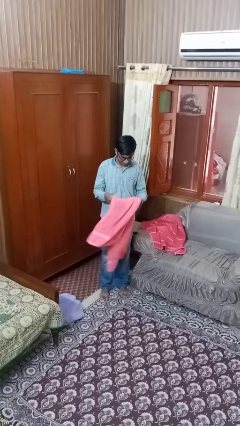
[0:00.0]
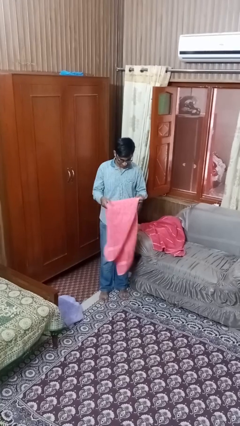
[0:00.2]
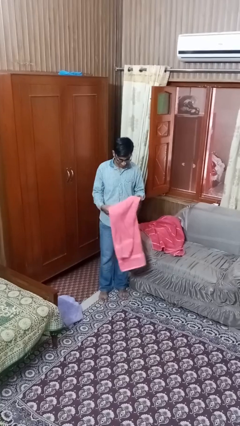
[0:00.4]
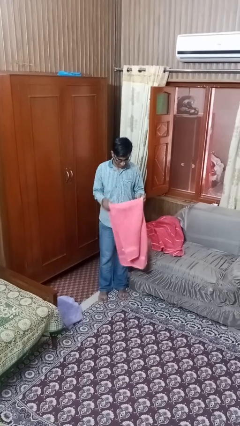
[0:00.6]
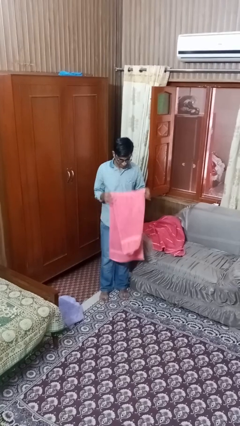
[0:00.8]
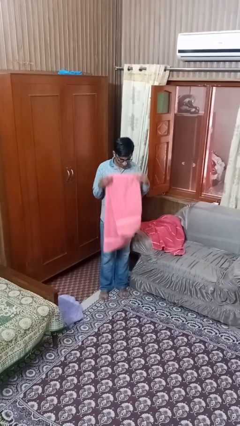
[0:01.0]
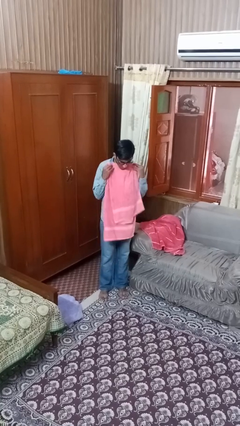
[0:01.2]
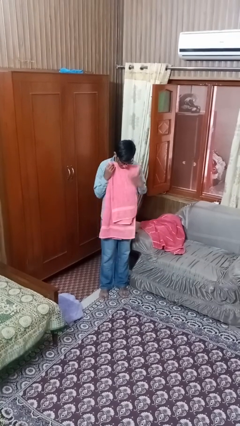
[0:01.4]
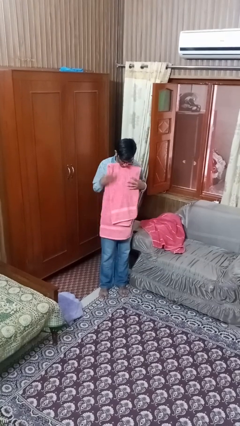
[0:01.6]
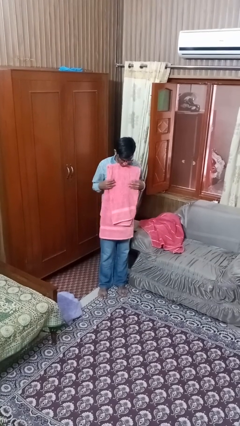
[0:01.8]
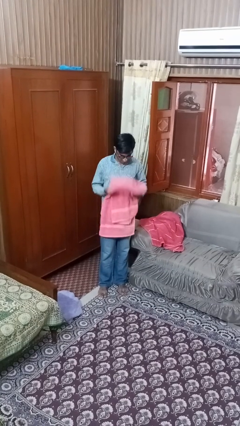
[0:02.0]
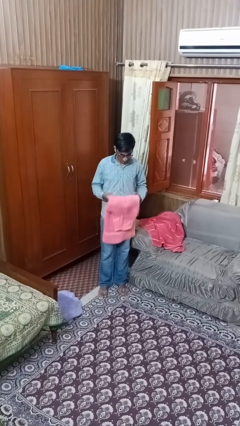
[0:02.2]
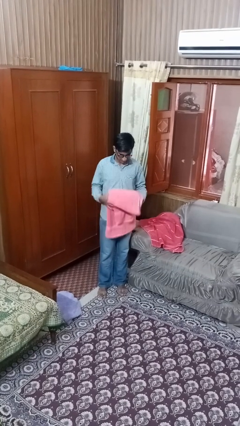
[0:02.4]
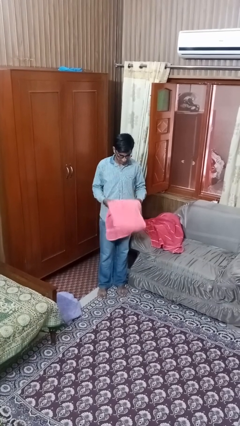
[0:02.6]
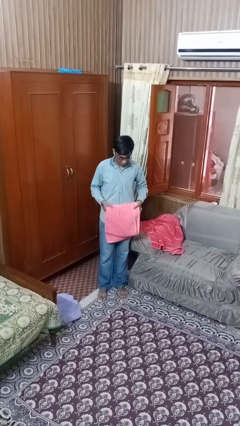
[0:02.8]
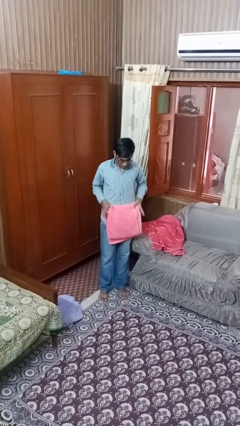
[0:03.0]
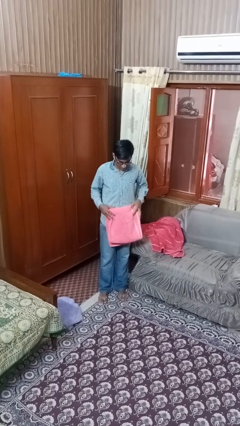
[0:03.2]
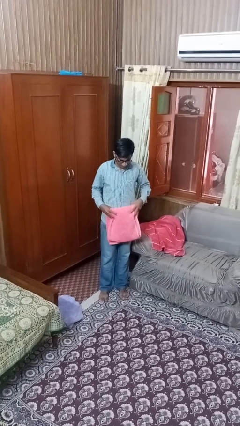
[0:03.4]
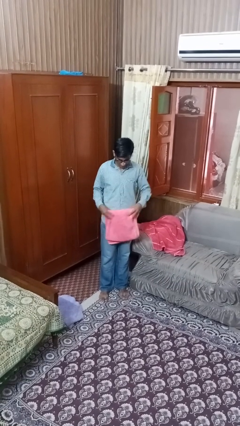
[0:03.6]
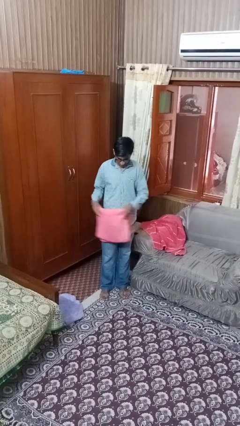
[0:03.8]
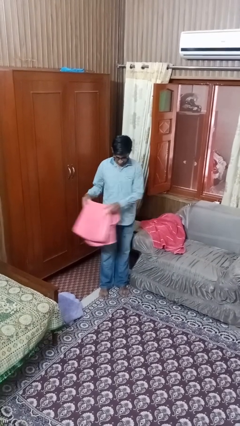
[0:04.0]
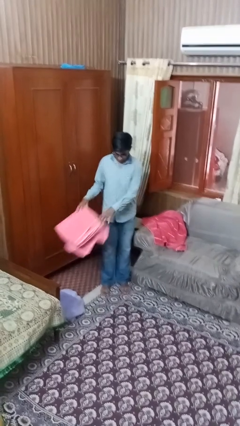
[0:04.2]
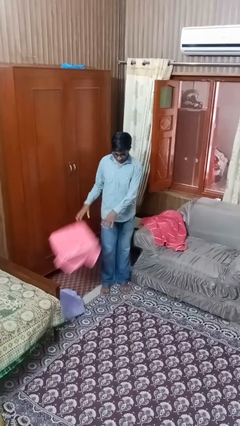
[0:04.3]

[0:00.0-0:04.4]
person folds towel

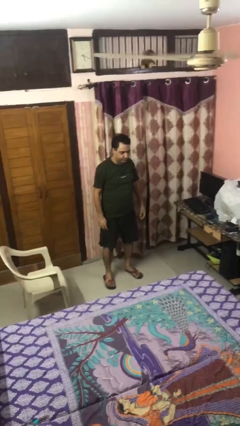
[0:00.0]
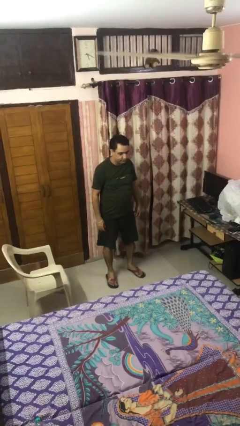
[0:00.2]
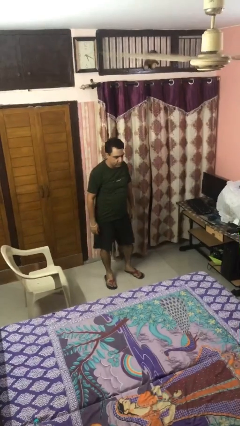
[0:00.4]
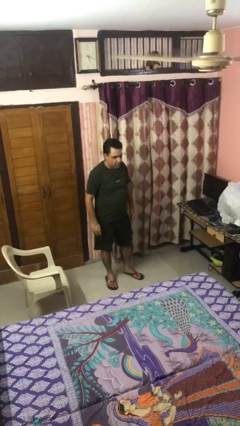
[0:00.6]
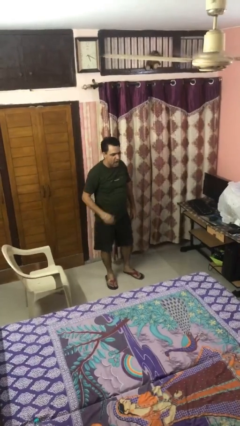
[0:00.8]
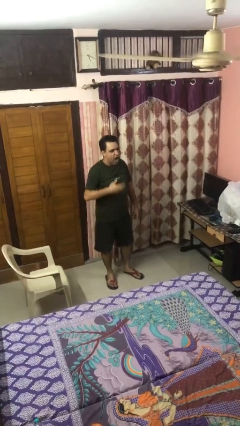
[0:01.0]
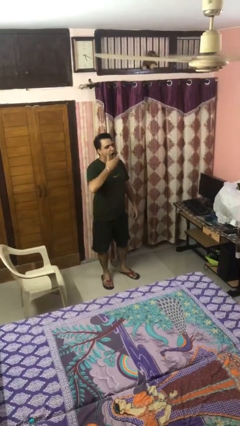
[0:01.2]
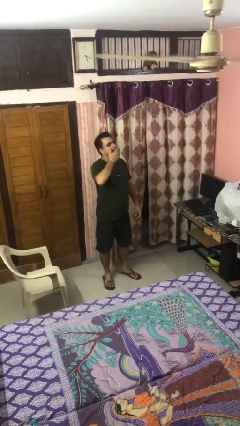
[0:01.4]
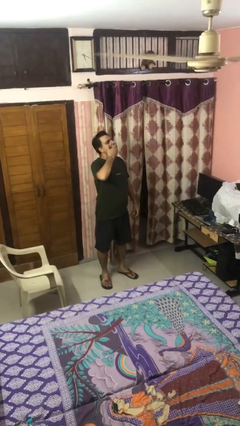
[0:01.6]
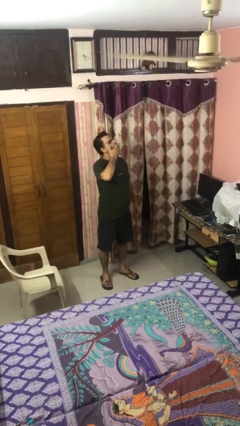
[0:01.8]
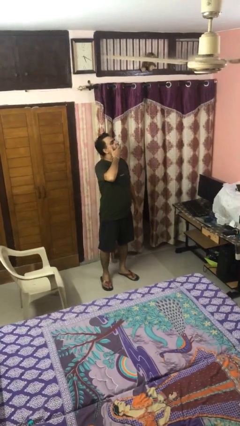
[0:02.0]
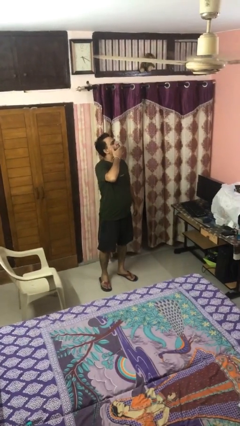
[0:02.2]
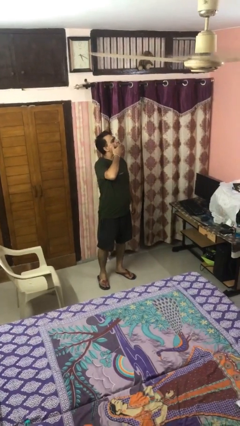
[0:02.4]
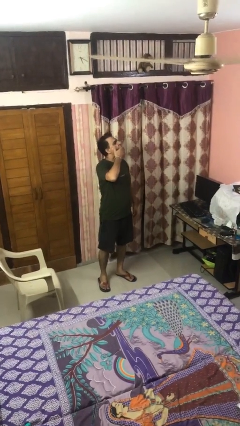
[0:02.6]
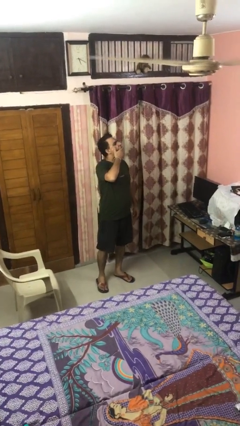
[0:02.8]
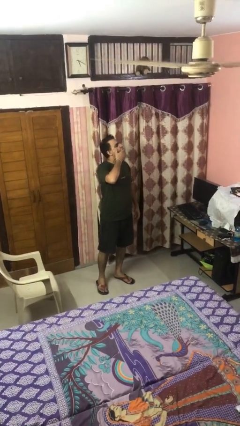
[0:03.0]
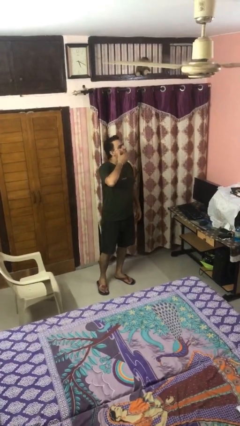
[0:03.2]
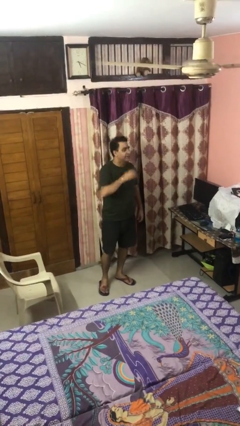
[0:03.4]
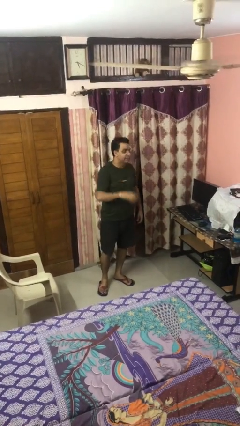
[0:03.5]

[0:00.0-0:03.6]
person yawns

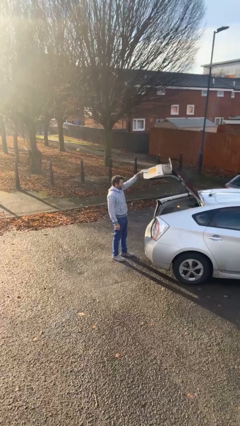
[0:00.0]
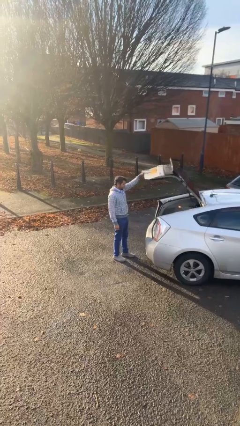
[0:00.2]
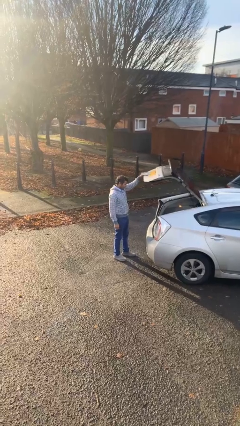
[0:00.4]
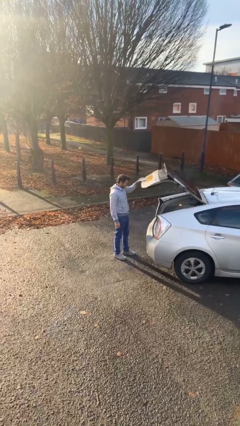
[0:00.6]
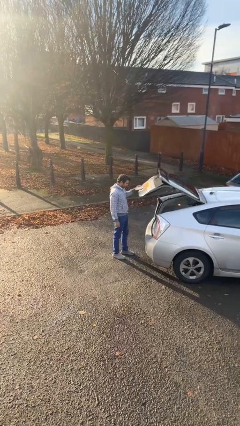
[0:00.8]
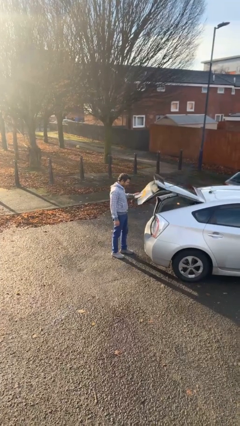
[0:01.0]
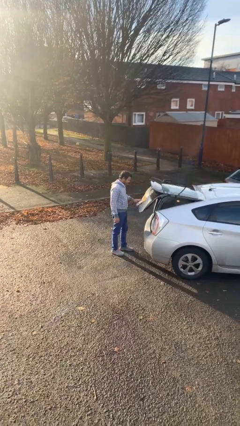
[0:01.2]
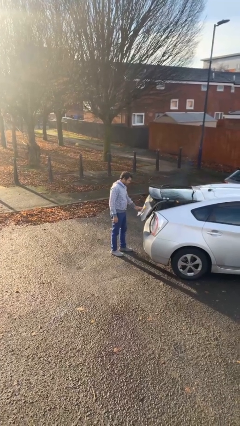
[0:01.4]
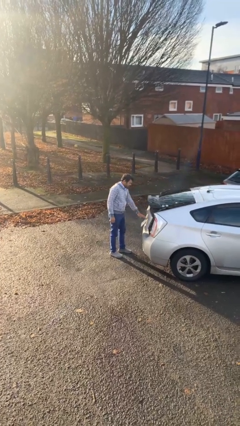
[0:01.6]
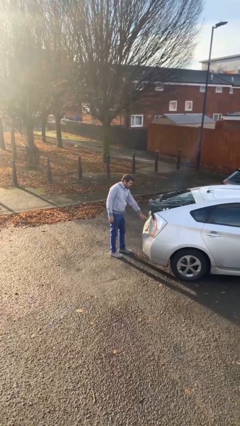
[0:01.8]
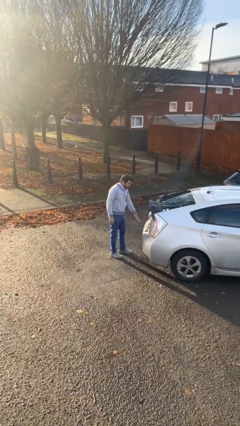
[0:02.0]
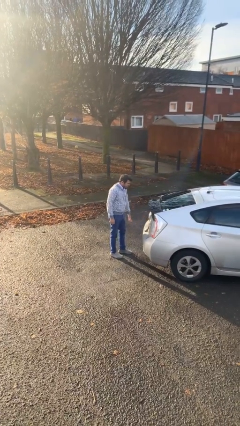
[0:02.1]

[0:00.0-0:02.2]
person closes car trunk

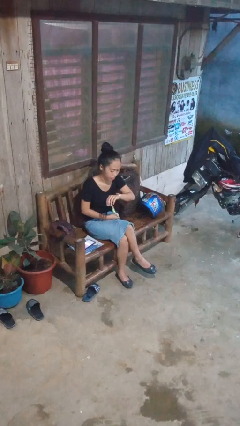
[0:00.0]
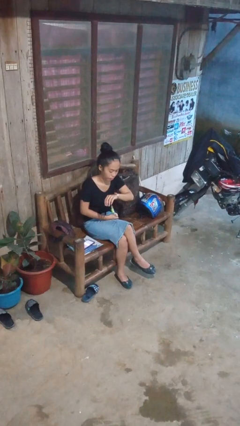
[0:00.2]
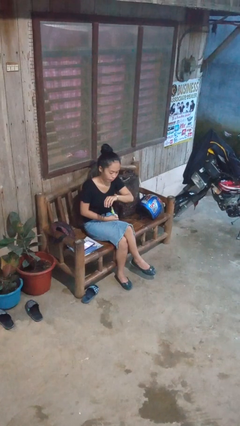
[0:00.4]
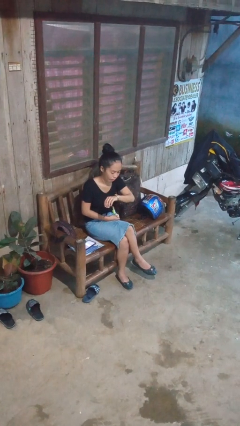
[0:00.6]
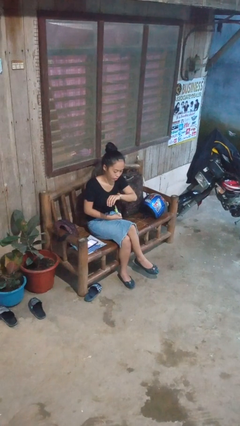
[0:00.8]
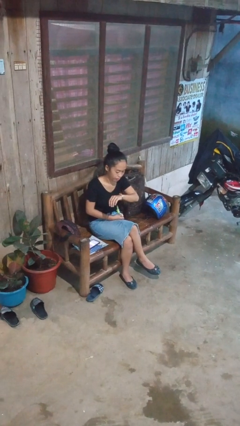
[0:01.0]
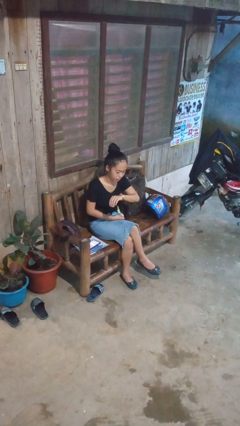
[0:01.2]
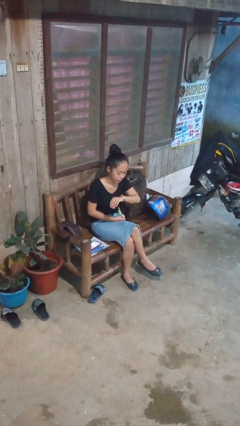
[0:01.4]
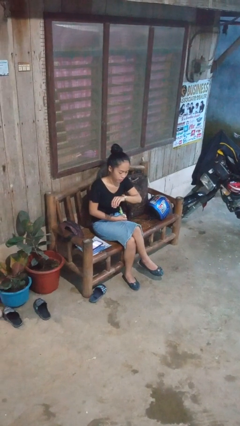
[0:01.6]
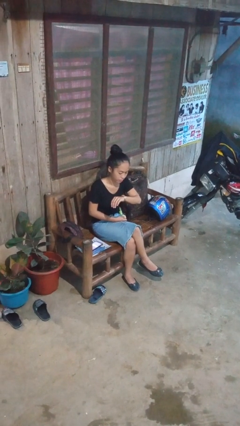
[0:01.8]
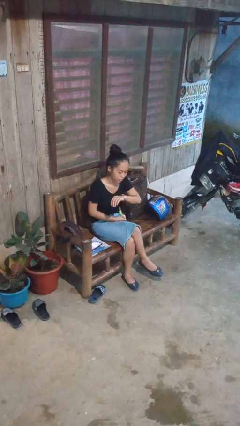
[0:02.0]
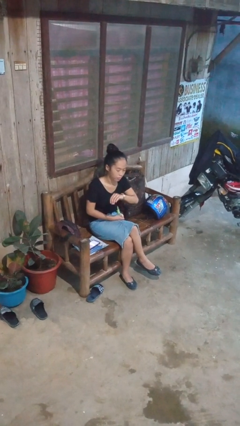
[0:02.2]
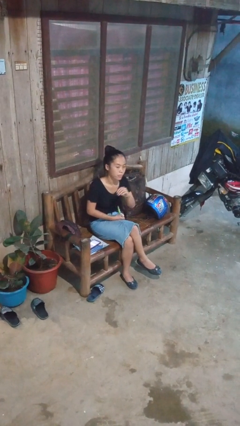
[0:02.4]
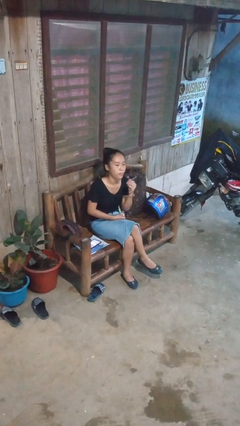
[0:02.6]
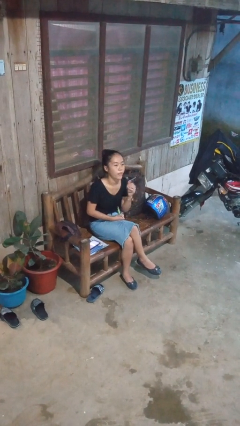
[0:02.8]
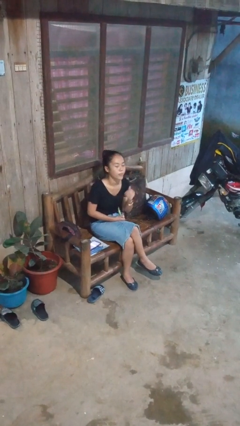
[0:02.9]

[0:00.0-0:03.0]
person looks at wristwatch

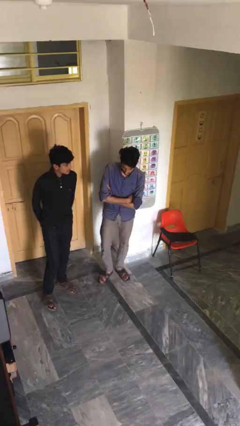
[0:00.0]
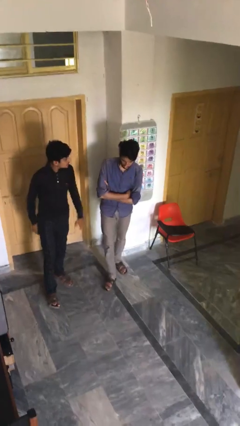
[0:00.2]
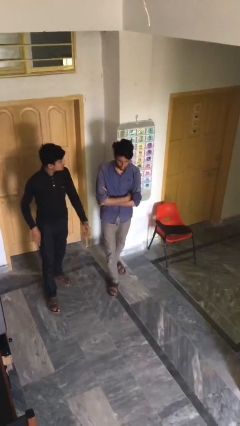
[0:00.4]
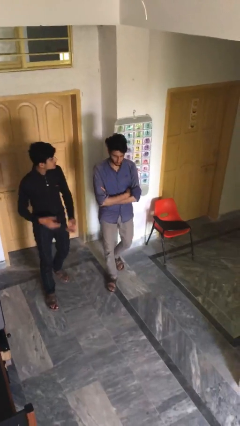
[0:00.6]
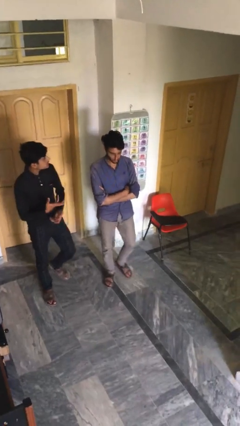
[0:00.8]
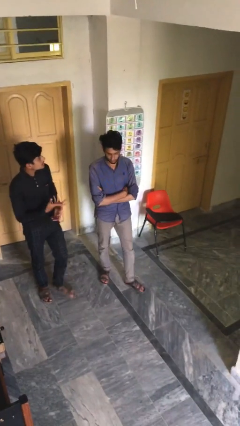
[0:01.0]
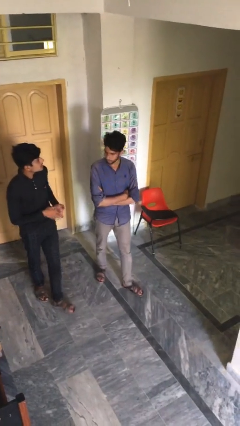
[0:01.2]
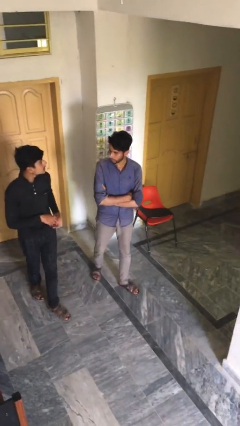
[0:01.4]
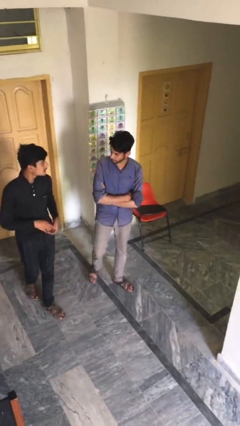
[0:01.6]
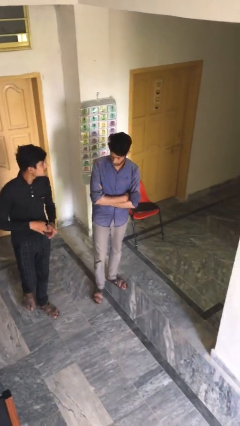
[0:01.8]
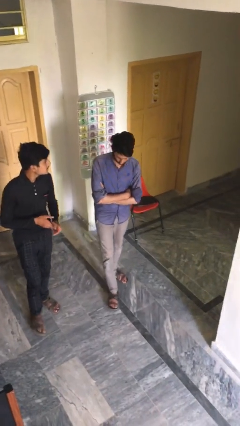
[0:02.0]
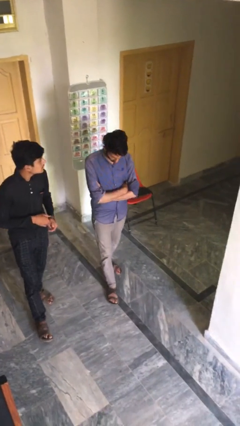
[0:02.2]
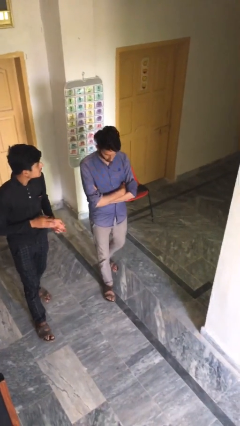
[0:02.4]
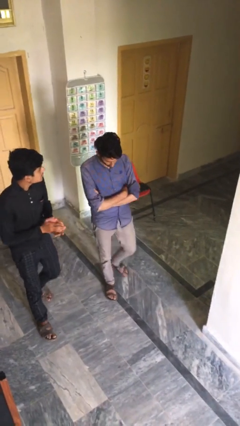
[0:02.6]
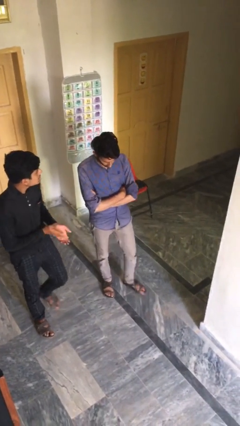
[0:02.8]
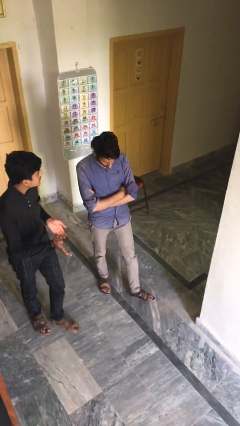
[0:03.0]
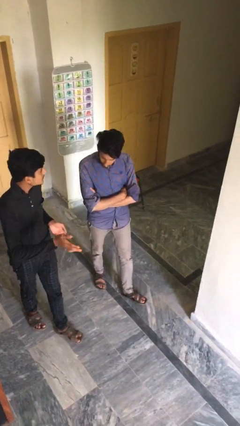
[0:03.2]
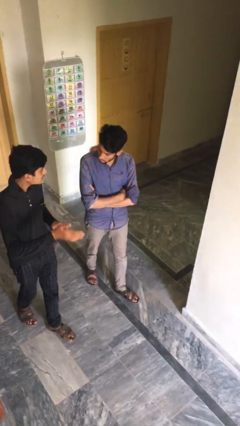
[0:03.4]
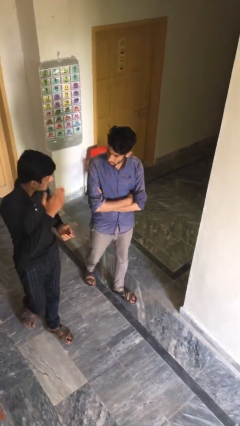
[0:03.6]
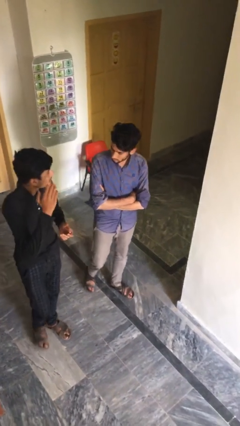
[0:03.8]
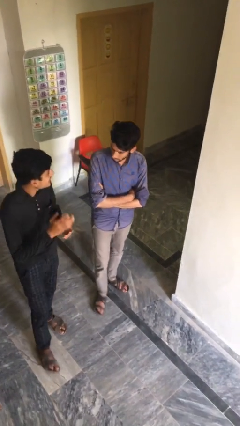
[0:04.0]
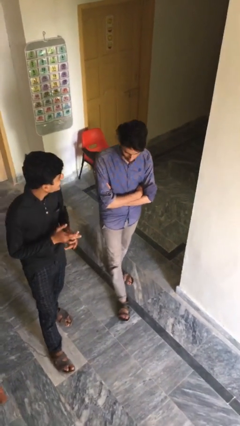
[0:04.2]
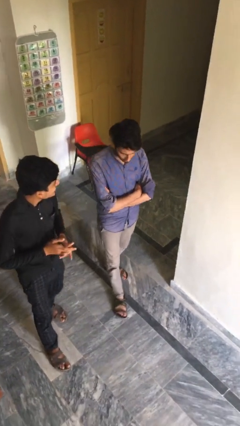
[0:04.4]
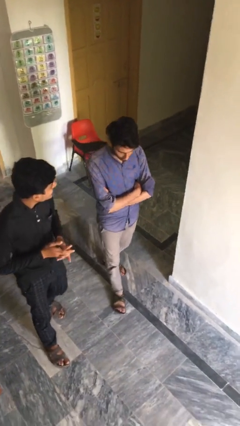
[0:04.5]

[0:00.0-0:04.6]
person talks to person
